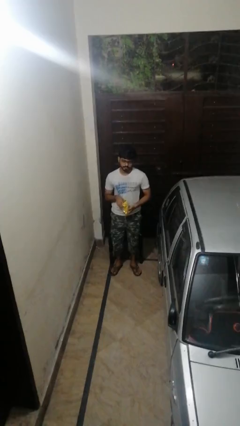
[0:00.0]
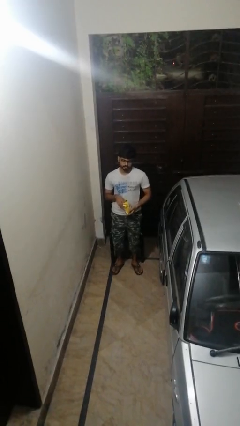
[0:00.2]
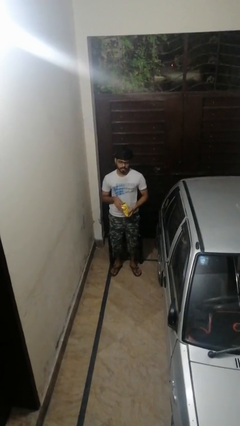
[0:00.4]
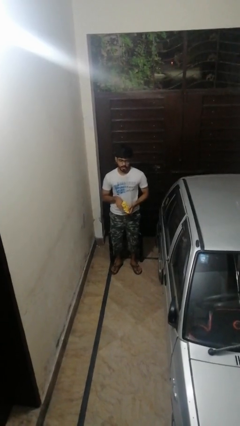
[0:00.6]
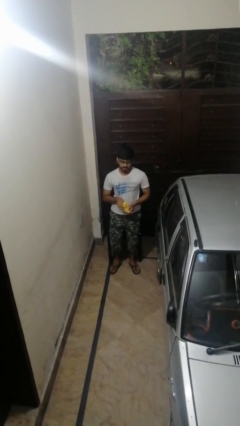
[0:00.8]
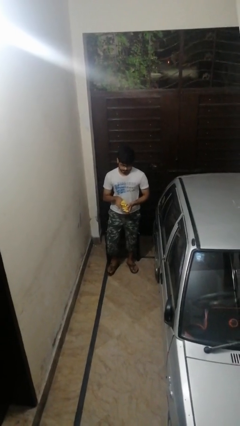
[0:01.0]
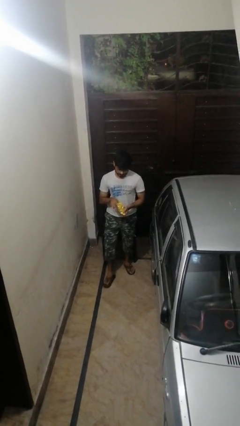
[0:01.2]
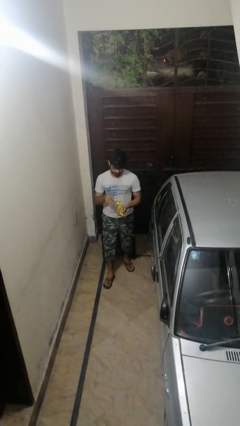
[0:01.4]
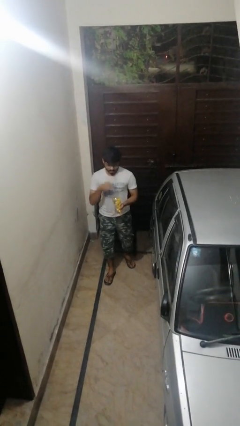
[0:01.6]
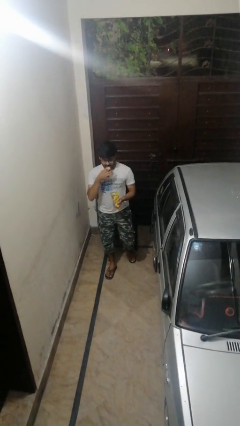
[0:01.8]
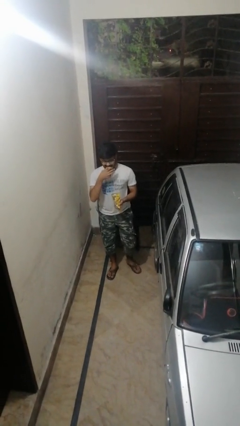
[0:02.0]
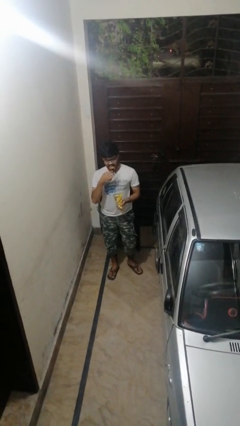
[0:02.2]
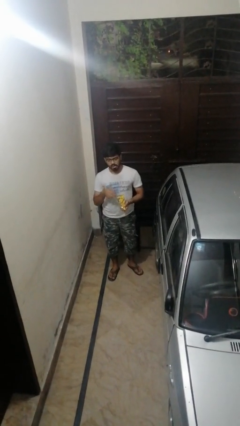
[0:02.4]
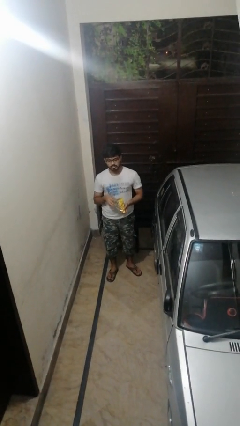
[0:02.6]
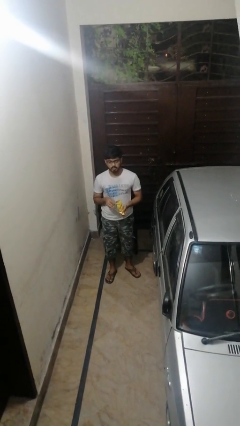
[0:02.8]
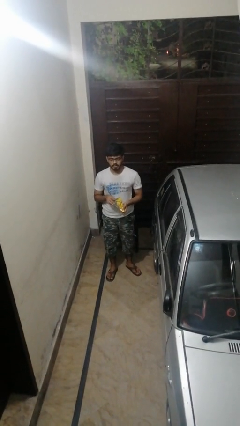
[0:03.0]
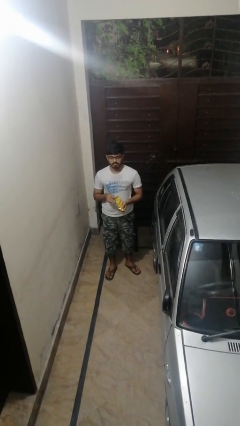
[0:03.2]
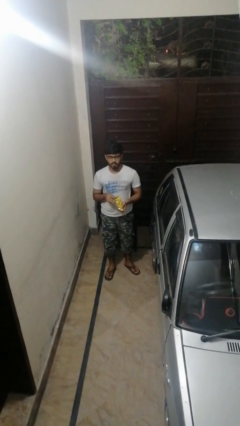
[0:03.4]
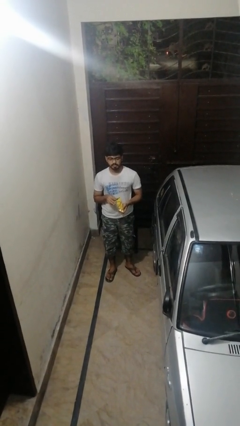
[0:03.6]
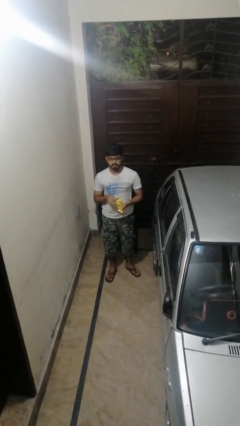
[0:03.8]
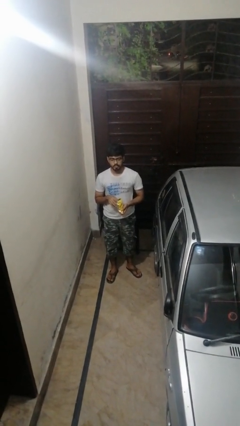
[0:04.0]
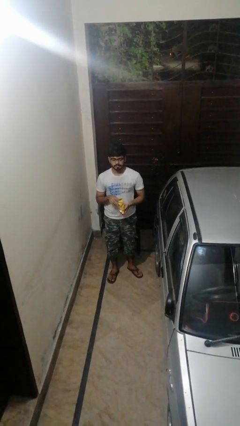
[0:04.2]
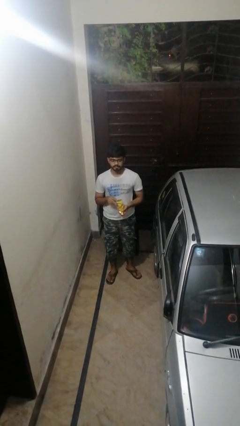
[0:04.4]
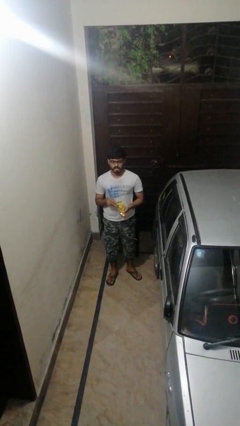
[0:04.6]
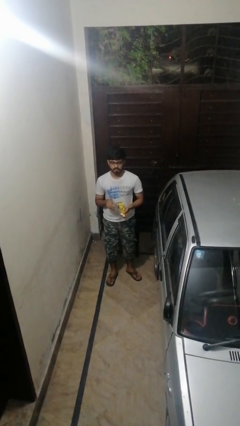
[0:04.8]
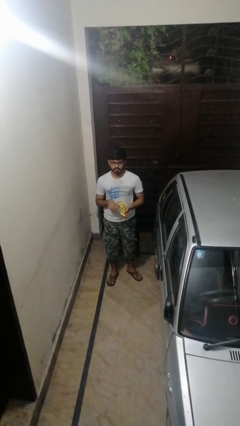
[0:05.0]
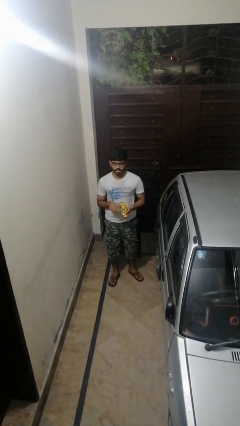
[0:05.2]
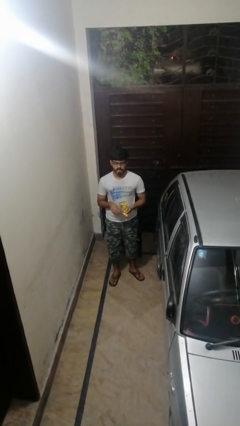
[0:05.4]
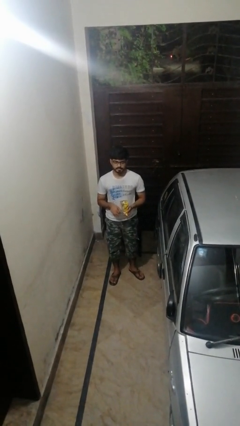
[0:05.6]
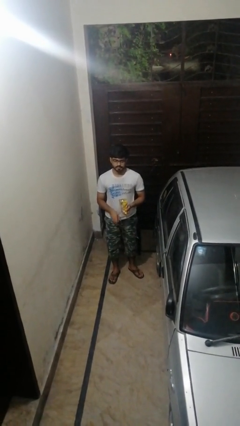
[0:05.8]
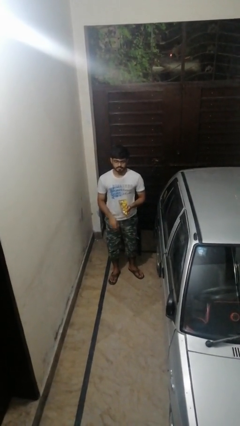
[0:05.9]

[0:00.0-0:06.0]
person eats snack from bag

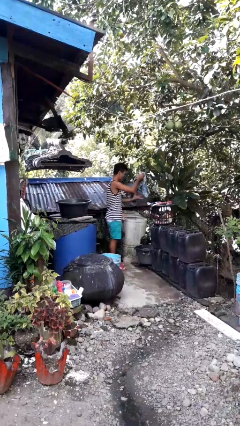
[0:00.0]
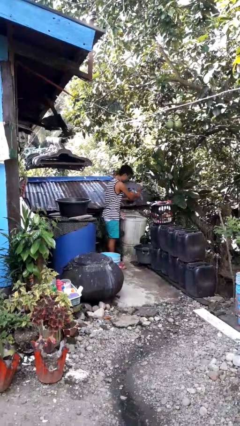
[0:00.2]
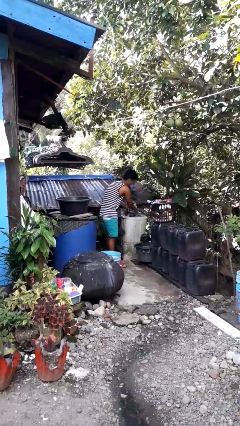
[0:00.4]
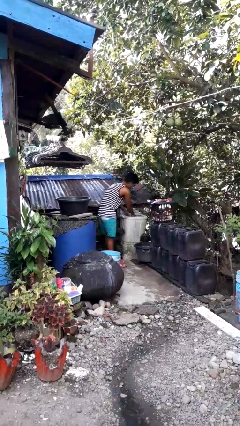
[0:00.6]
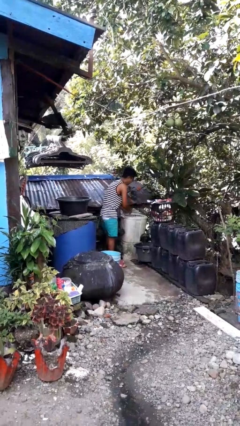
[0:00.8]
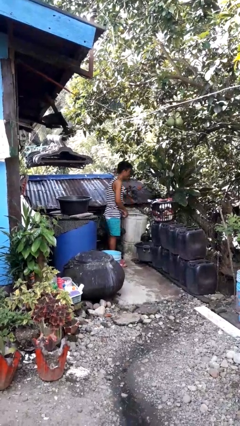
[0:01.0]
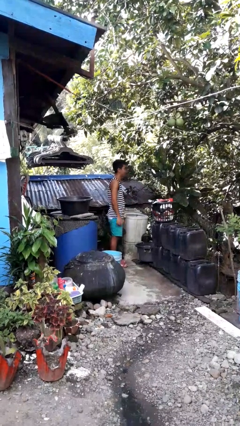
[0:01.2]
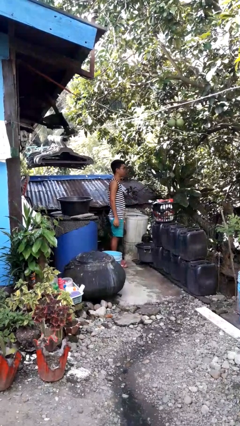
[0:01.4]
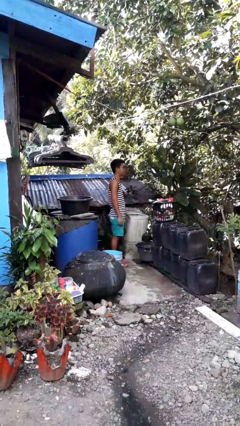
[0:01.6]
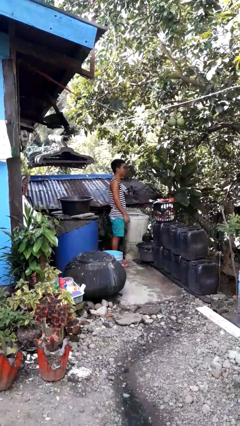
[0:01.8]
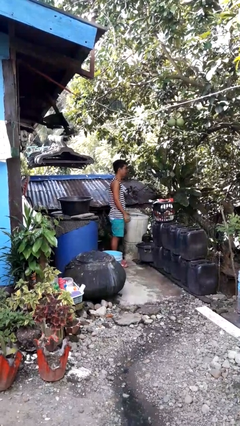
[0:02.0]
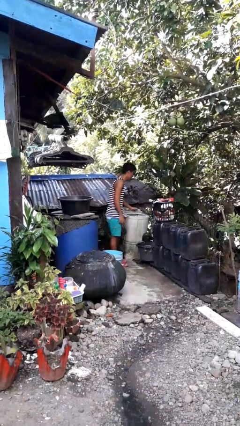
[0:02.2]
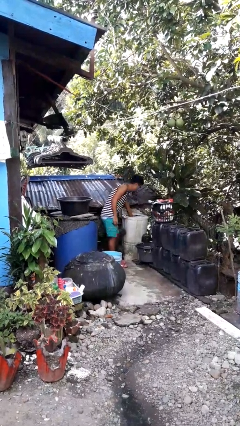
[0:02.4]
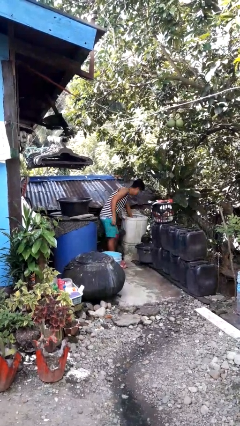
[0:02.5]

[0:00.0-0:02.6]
person loads dryer

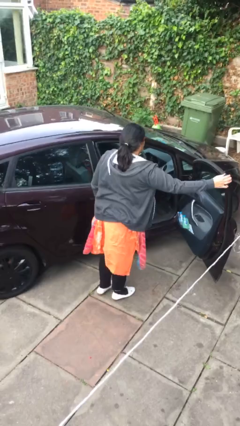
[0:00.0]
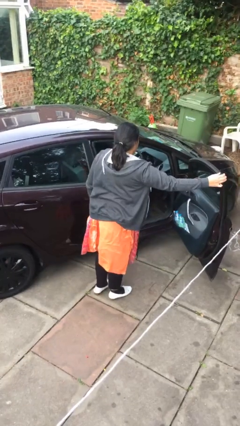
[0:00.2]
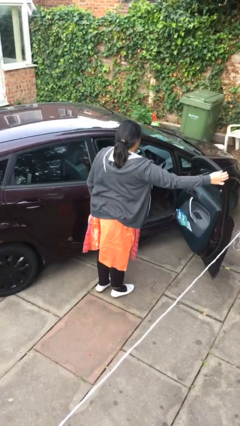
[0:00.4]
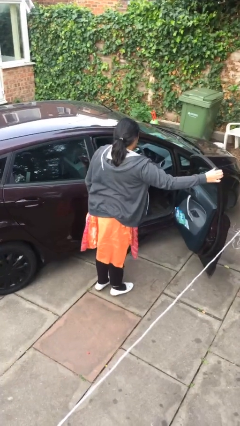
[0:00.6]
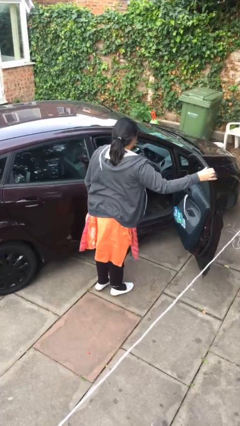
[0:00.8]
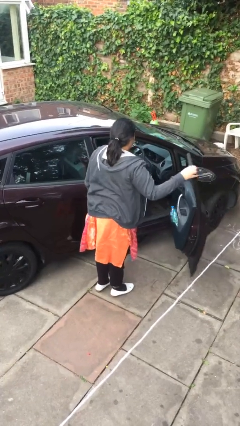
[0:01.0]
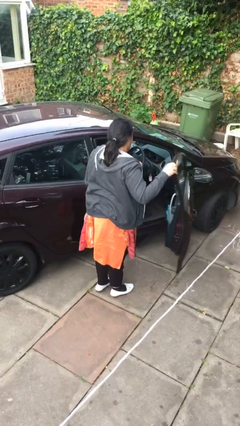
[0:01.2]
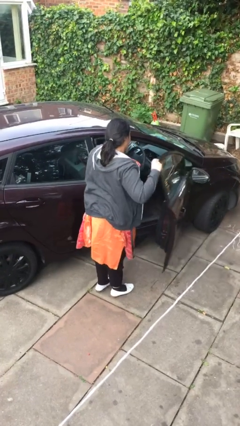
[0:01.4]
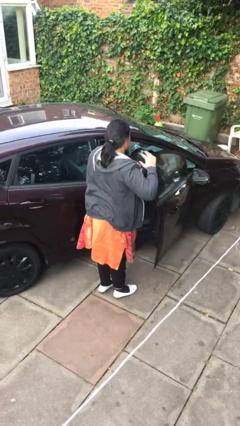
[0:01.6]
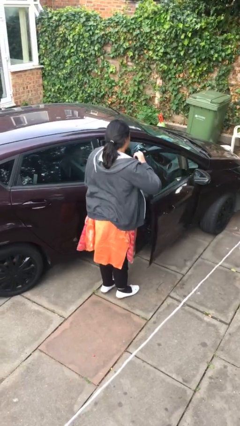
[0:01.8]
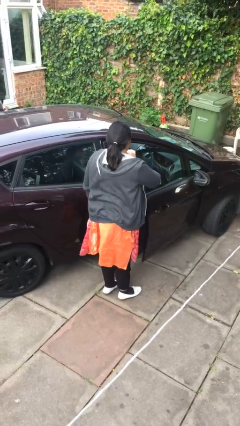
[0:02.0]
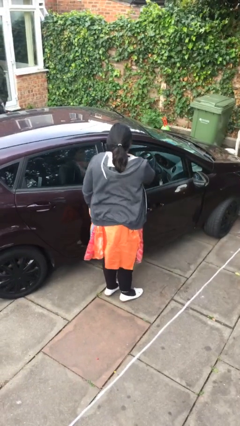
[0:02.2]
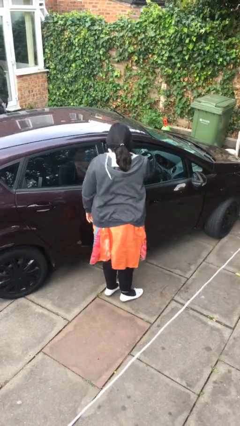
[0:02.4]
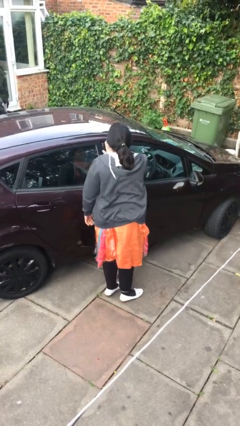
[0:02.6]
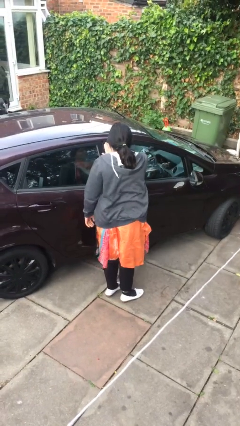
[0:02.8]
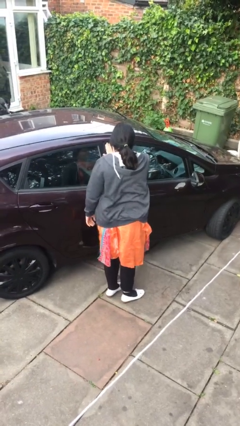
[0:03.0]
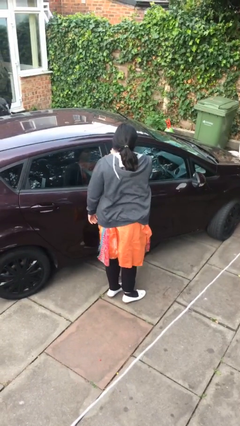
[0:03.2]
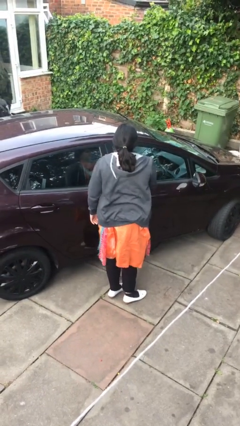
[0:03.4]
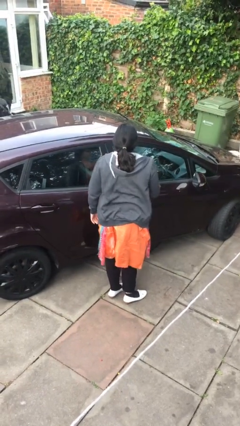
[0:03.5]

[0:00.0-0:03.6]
person closes car door

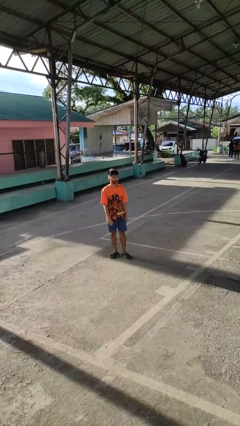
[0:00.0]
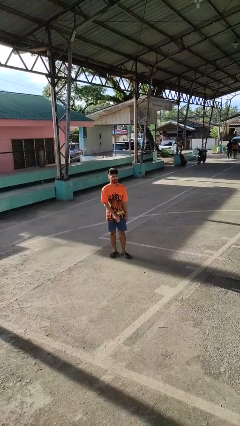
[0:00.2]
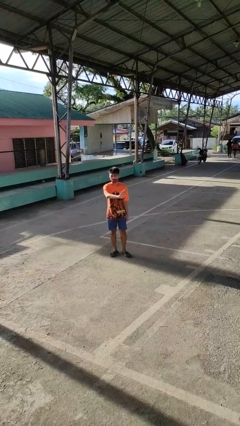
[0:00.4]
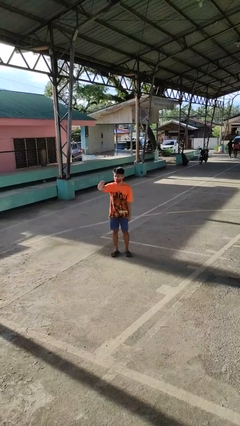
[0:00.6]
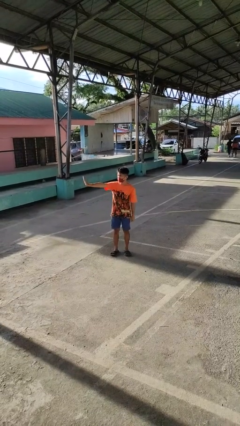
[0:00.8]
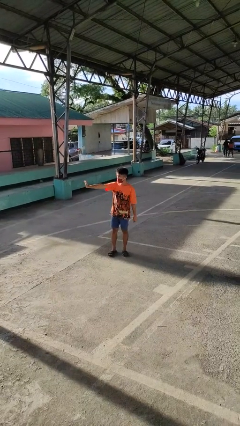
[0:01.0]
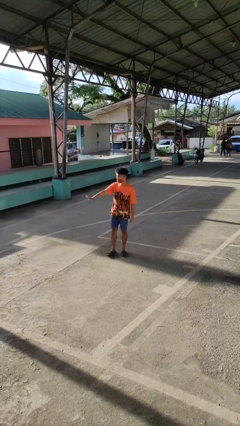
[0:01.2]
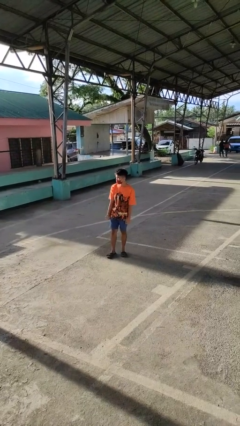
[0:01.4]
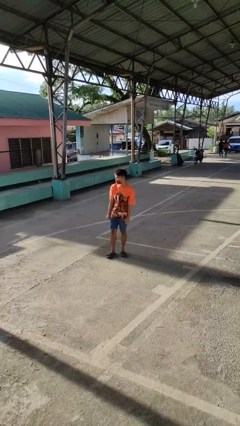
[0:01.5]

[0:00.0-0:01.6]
person gestures swipe right

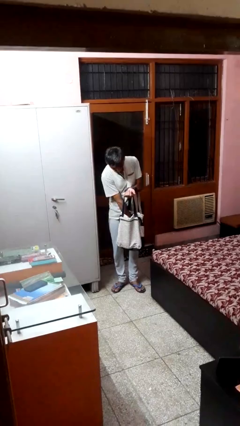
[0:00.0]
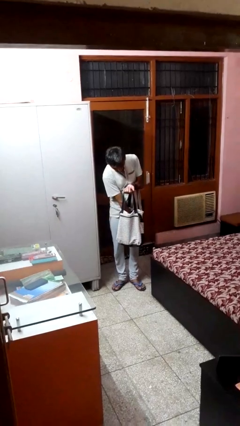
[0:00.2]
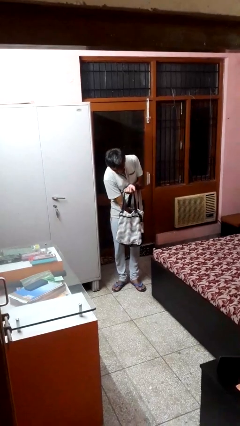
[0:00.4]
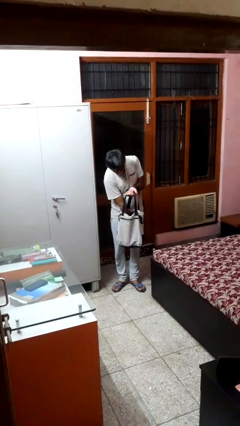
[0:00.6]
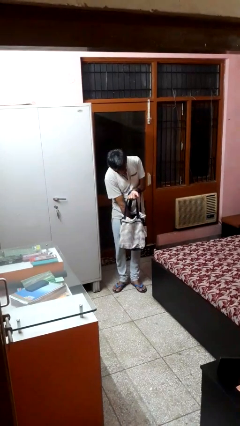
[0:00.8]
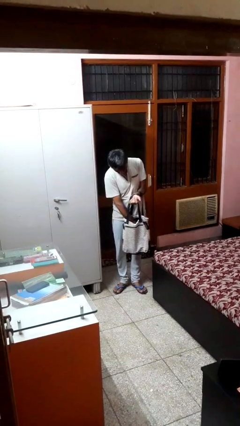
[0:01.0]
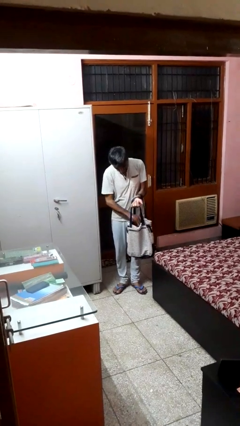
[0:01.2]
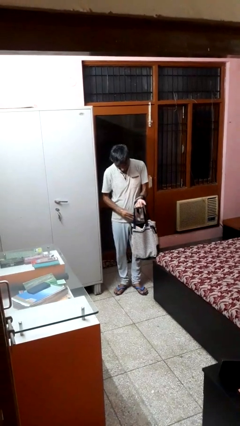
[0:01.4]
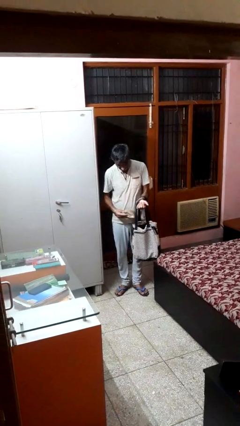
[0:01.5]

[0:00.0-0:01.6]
person takes object from bag

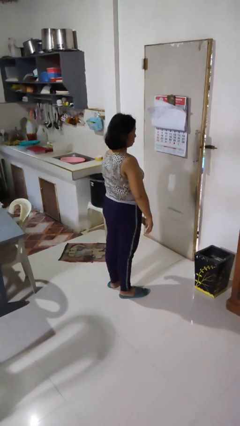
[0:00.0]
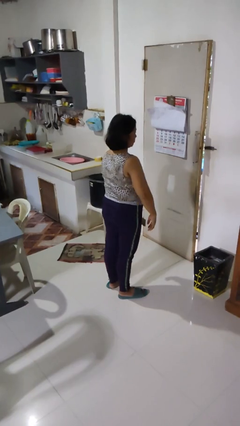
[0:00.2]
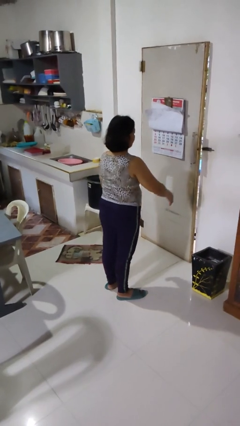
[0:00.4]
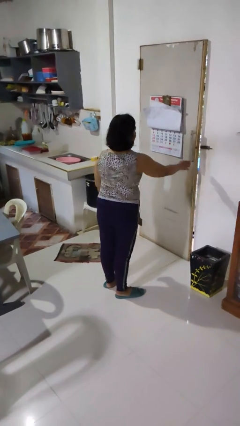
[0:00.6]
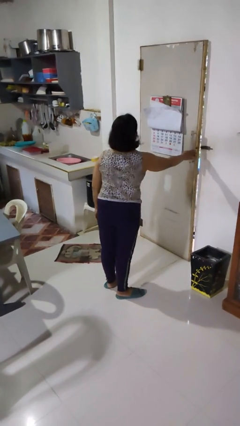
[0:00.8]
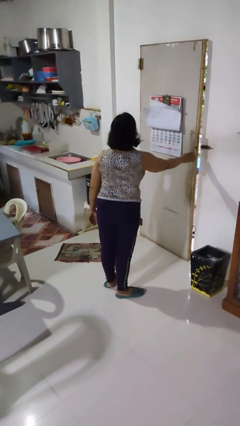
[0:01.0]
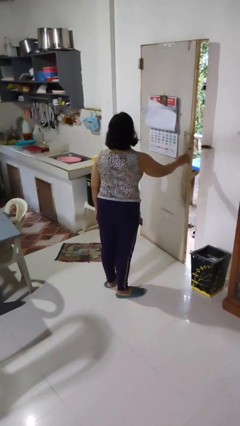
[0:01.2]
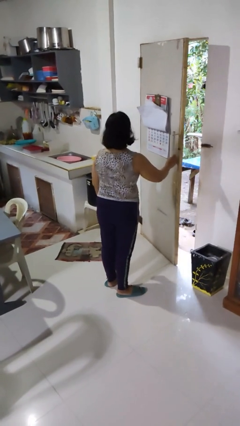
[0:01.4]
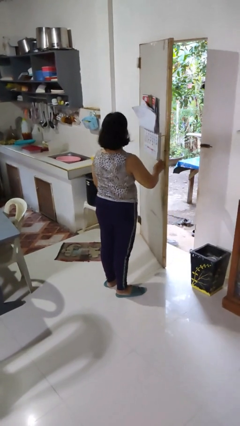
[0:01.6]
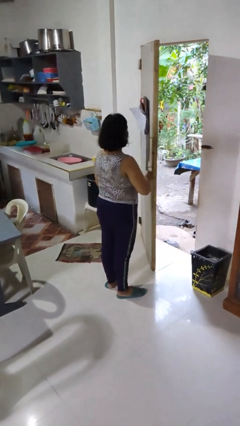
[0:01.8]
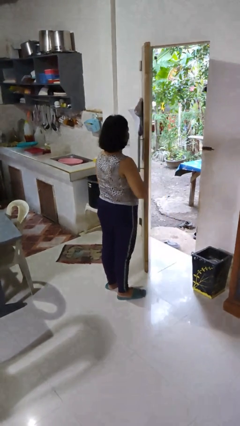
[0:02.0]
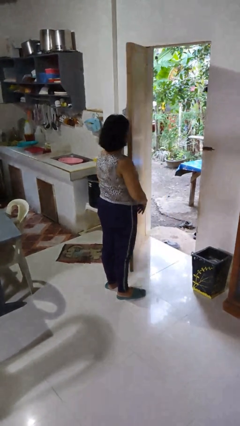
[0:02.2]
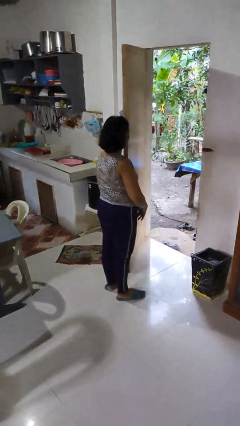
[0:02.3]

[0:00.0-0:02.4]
person opens facility door
